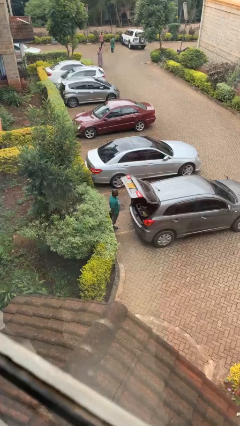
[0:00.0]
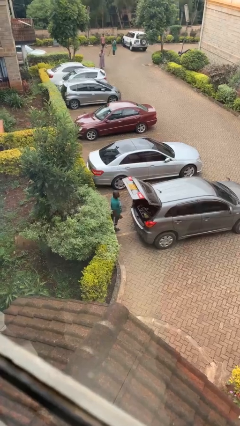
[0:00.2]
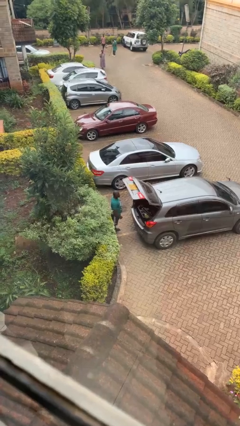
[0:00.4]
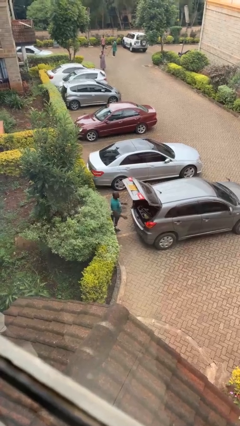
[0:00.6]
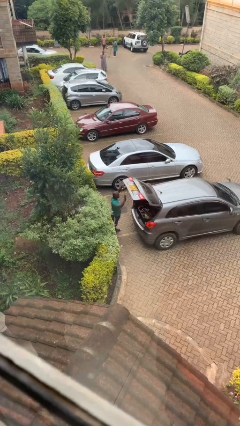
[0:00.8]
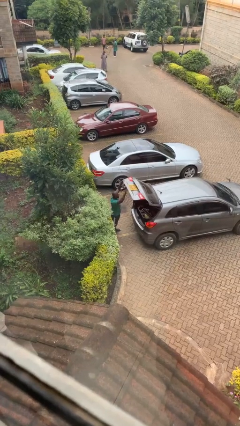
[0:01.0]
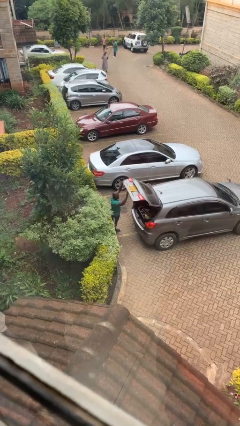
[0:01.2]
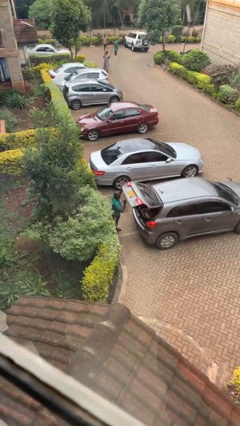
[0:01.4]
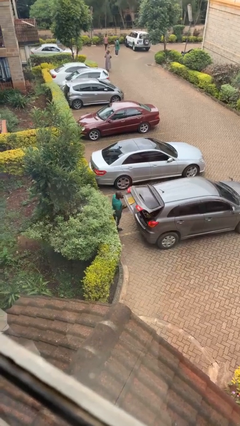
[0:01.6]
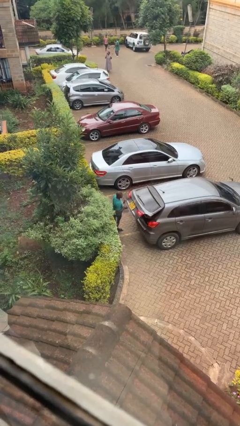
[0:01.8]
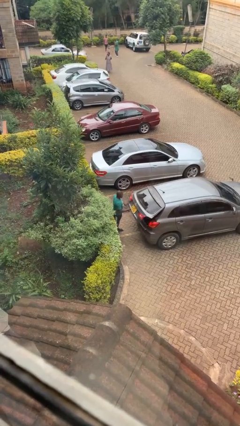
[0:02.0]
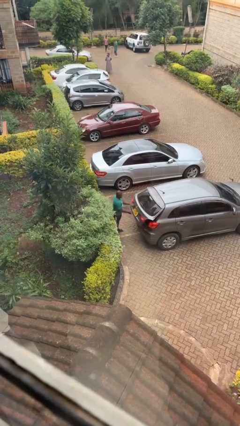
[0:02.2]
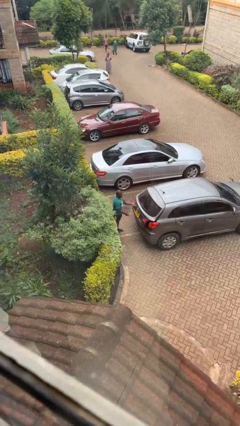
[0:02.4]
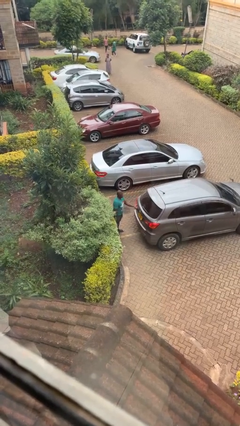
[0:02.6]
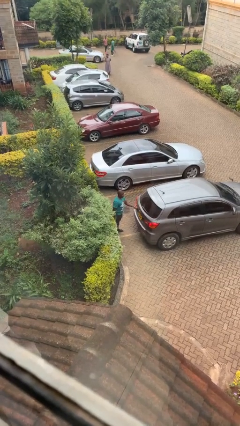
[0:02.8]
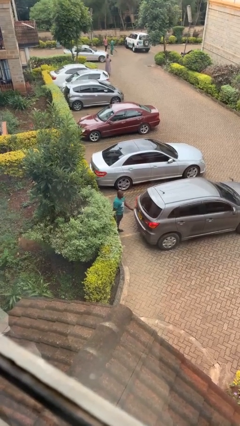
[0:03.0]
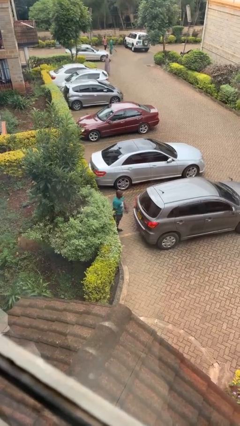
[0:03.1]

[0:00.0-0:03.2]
person closes car trunk

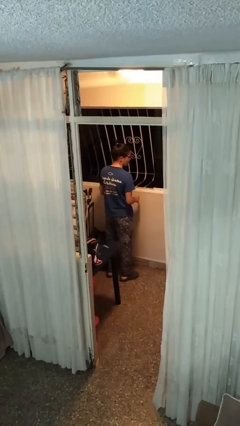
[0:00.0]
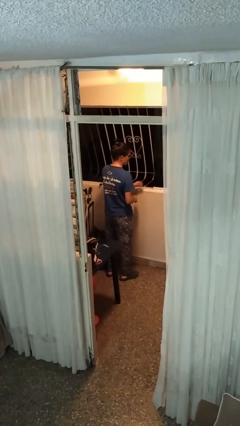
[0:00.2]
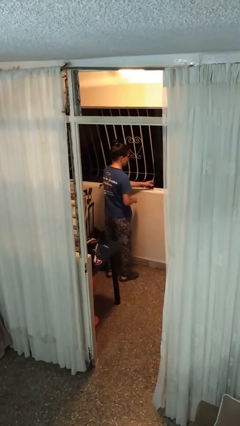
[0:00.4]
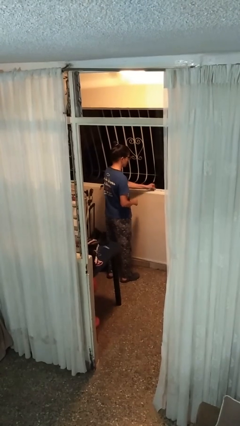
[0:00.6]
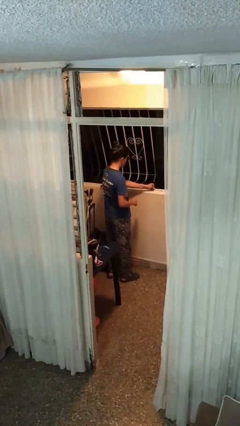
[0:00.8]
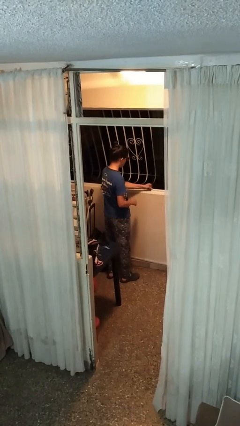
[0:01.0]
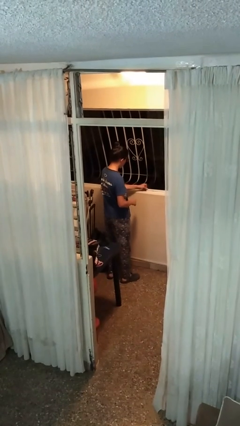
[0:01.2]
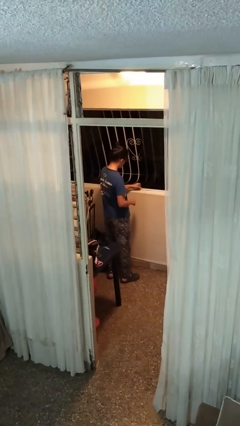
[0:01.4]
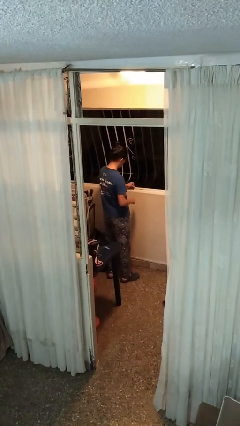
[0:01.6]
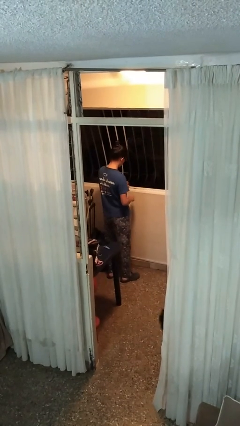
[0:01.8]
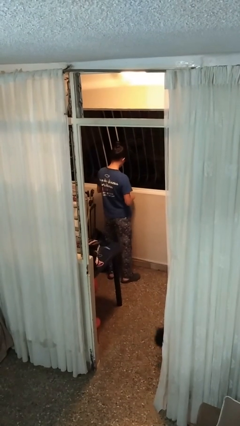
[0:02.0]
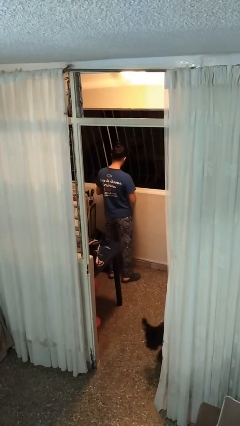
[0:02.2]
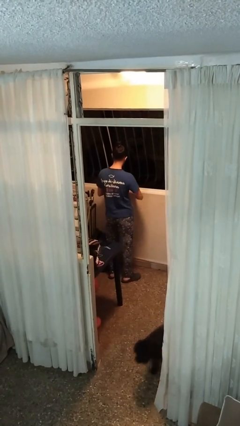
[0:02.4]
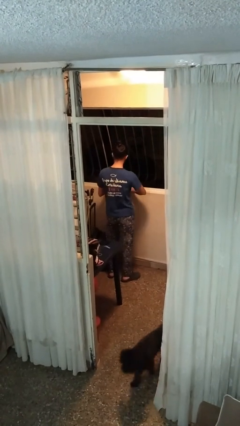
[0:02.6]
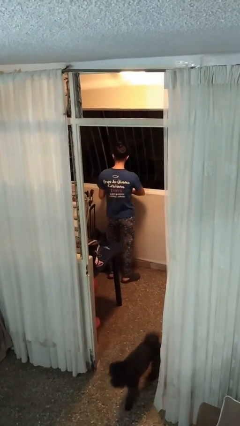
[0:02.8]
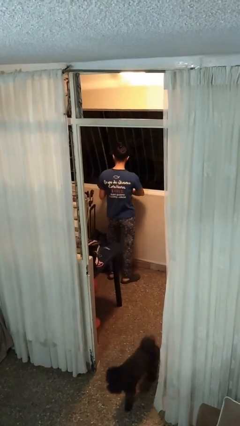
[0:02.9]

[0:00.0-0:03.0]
person closes home window

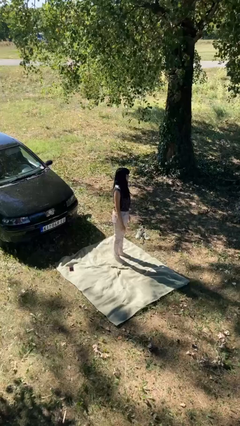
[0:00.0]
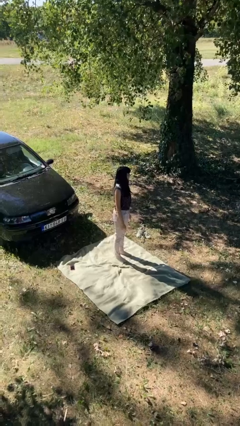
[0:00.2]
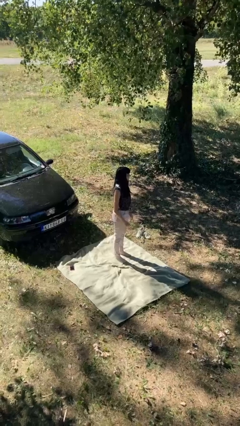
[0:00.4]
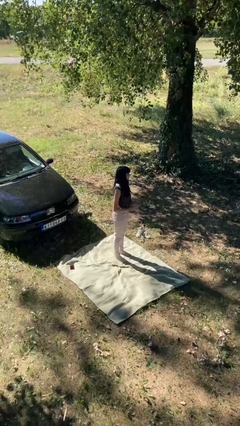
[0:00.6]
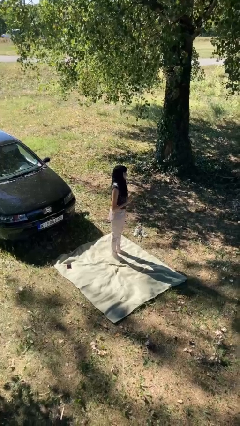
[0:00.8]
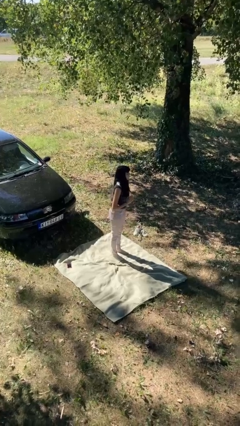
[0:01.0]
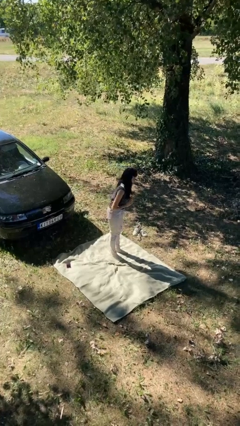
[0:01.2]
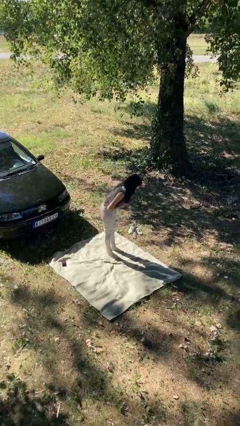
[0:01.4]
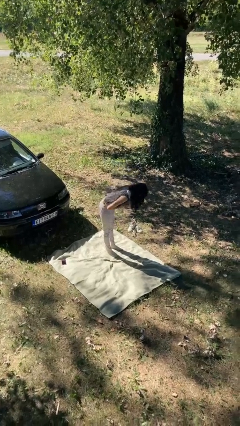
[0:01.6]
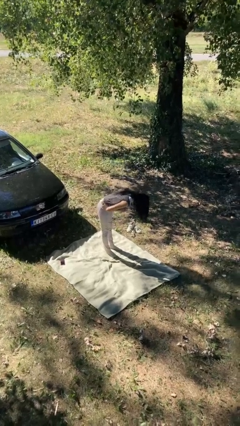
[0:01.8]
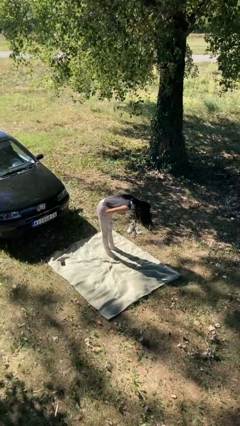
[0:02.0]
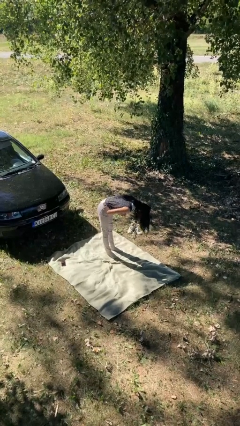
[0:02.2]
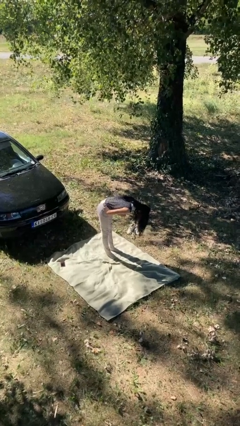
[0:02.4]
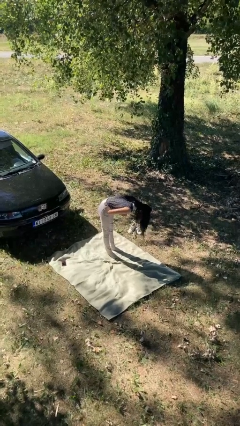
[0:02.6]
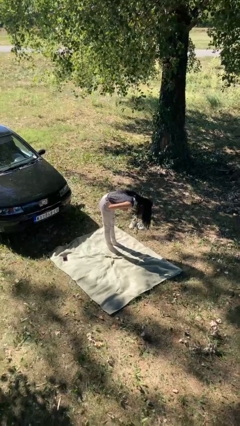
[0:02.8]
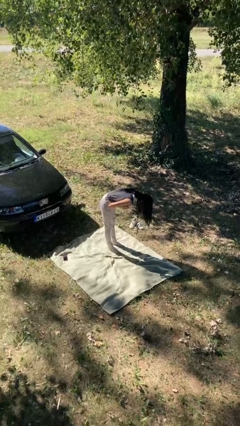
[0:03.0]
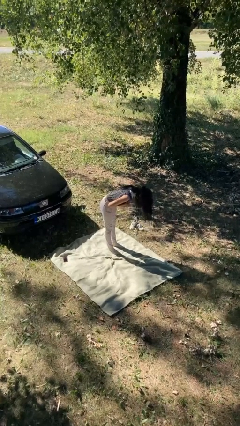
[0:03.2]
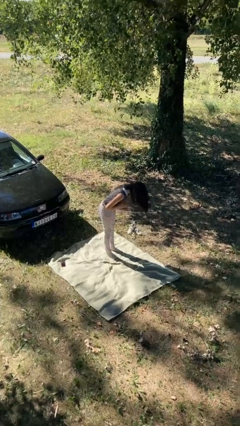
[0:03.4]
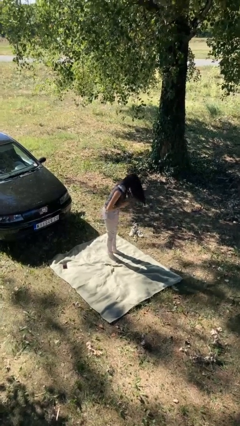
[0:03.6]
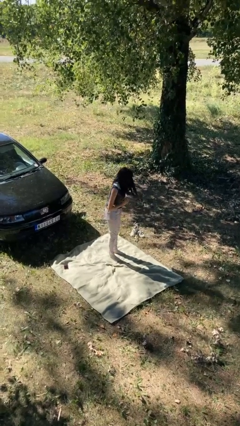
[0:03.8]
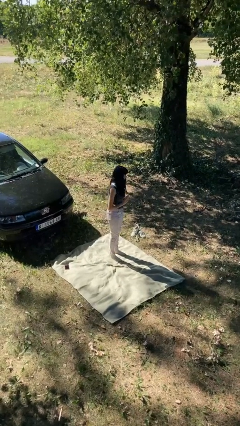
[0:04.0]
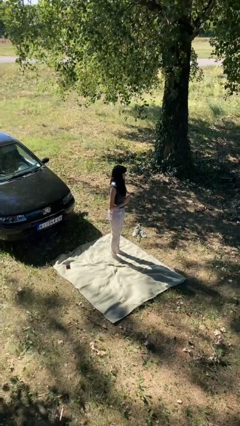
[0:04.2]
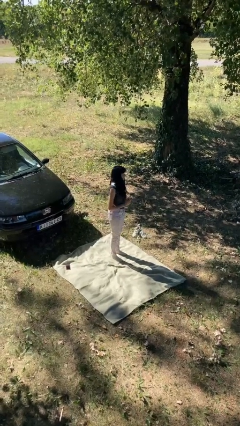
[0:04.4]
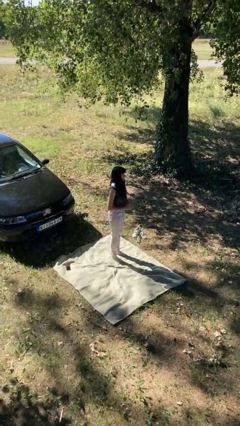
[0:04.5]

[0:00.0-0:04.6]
person bows

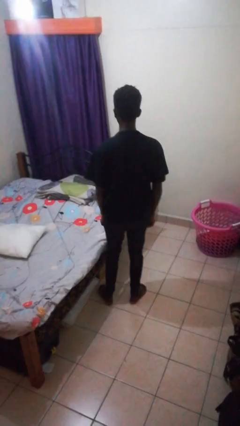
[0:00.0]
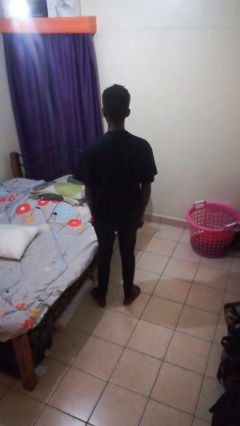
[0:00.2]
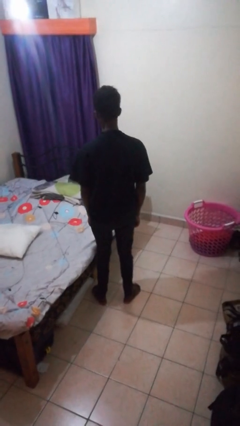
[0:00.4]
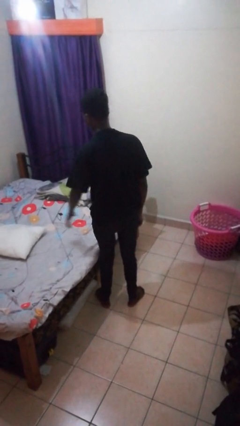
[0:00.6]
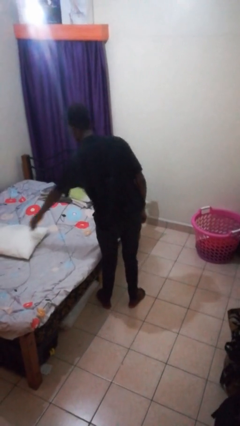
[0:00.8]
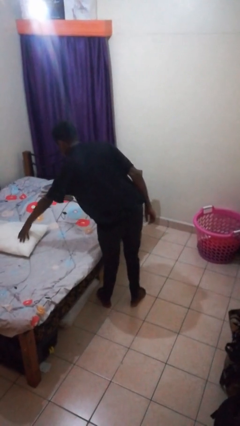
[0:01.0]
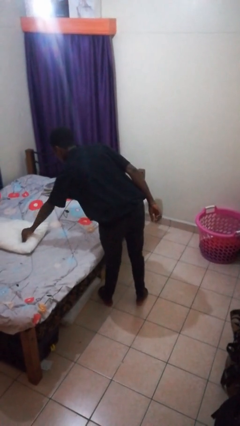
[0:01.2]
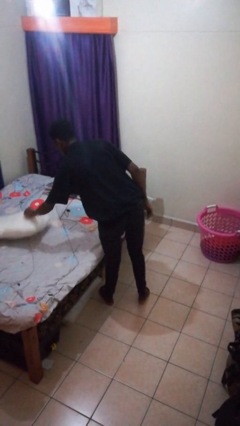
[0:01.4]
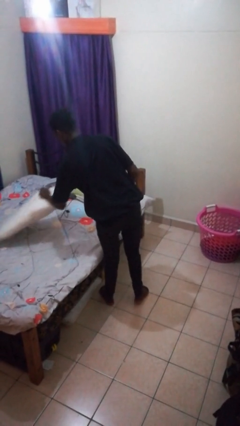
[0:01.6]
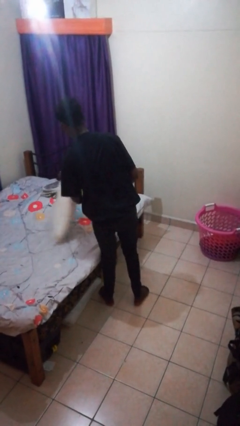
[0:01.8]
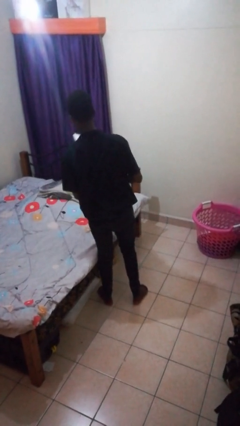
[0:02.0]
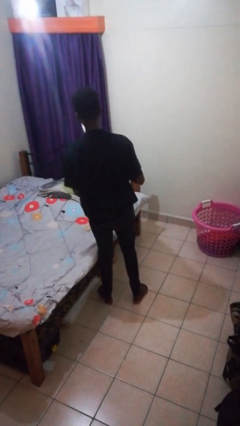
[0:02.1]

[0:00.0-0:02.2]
person picks up object from bed

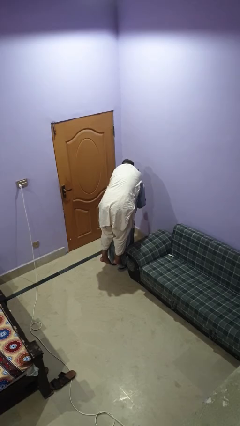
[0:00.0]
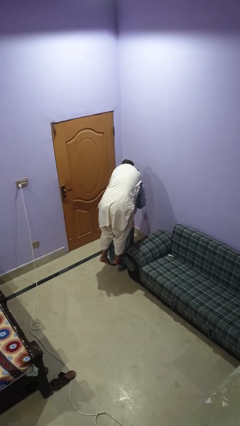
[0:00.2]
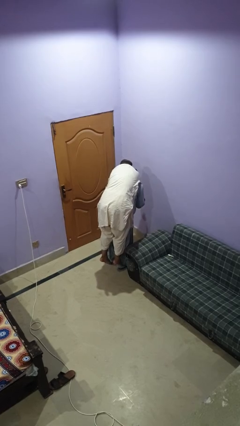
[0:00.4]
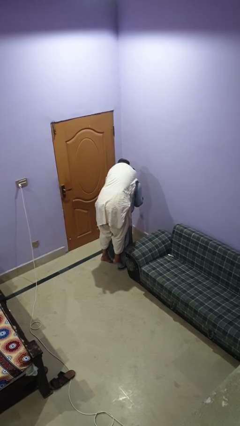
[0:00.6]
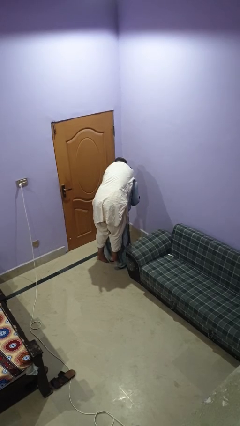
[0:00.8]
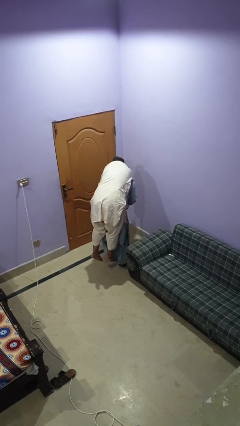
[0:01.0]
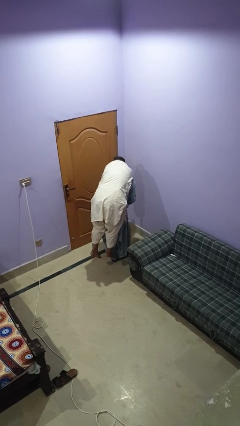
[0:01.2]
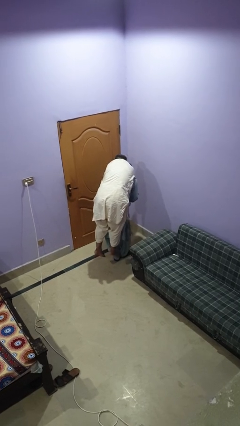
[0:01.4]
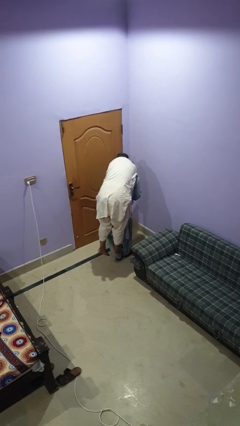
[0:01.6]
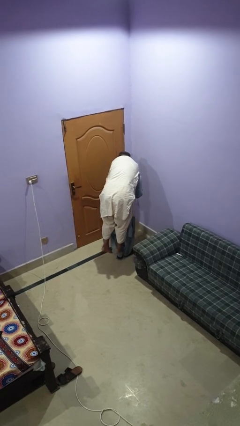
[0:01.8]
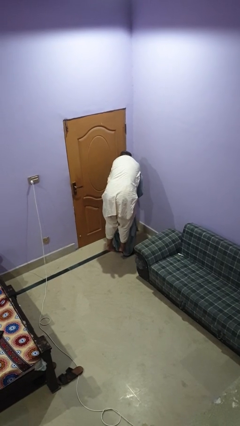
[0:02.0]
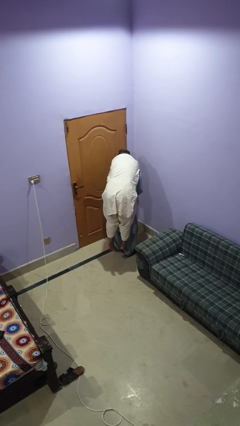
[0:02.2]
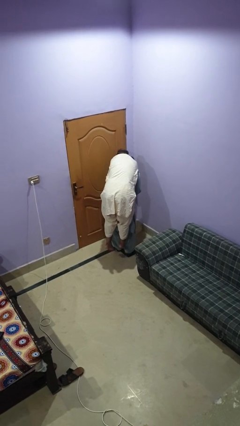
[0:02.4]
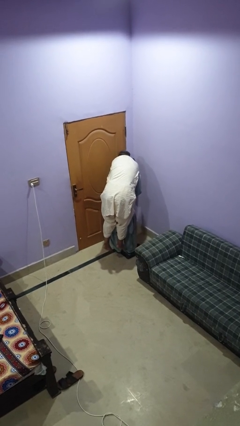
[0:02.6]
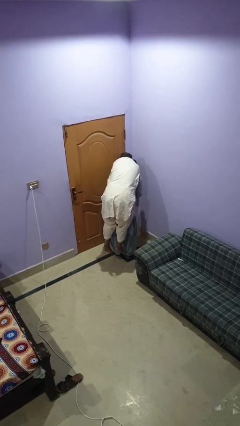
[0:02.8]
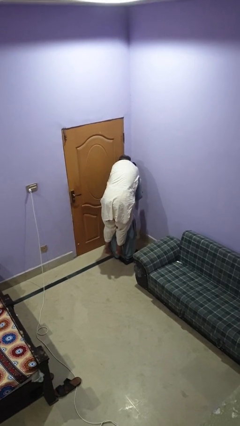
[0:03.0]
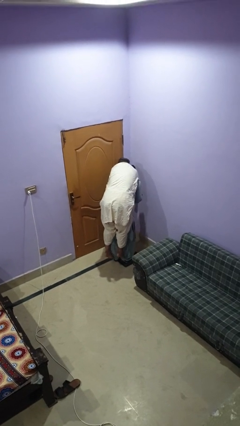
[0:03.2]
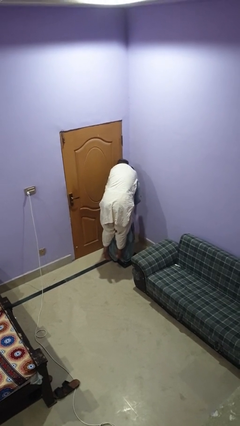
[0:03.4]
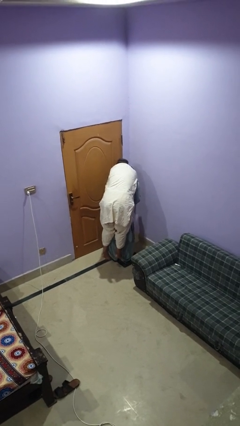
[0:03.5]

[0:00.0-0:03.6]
person carries person on back

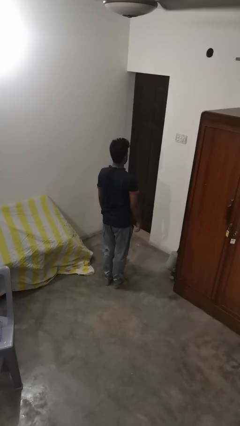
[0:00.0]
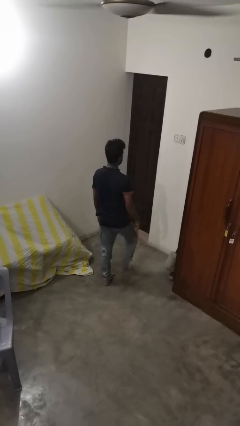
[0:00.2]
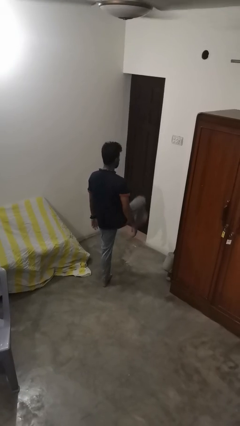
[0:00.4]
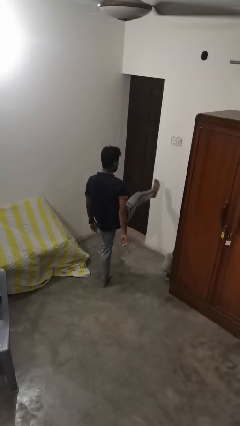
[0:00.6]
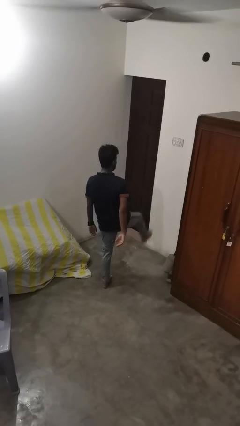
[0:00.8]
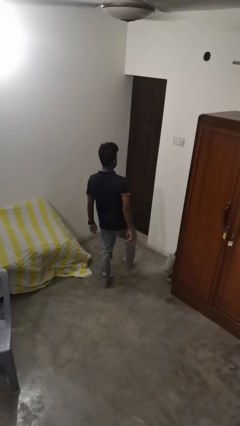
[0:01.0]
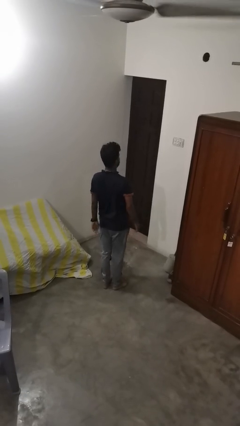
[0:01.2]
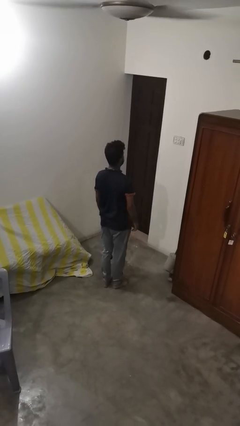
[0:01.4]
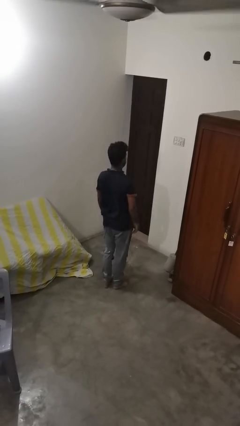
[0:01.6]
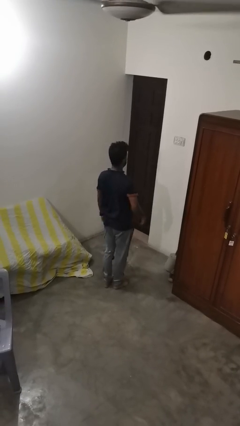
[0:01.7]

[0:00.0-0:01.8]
person karate kicks
